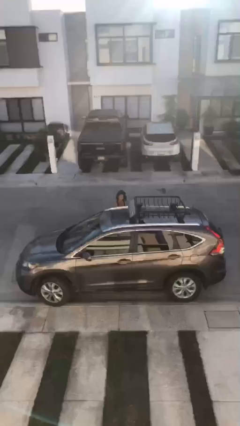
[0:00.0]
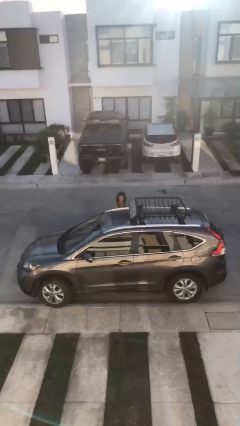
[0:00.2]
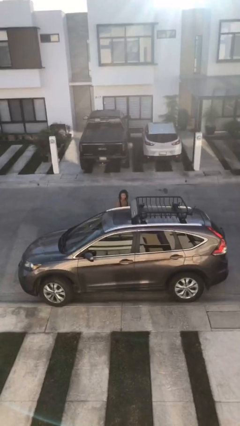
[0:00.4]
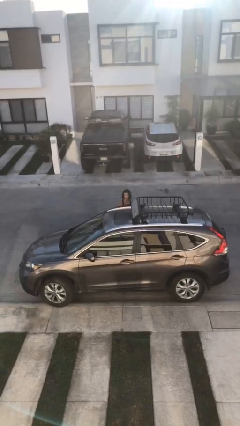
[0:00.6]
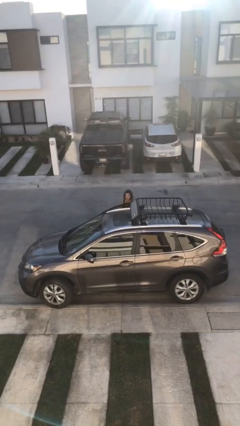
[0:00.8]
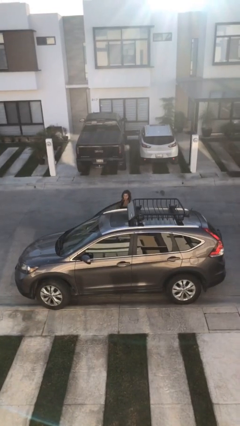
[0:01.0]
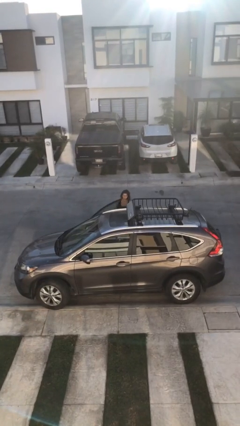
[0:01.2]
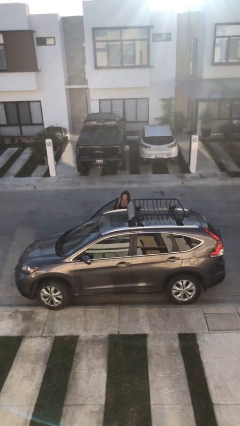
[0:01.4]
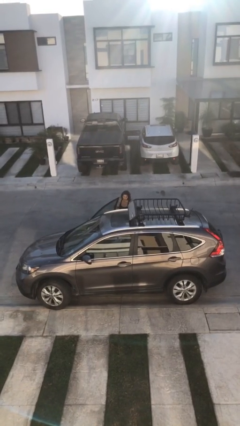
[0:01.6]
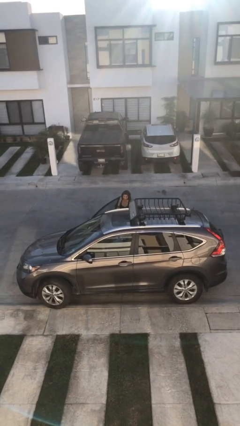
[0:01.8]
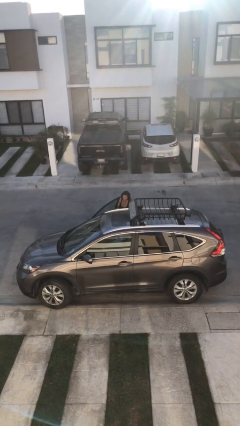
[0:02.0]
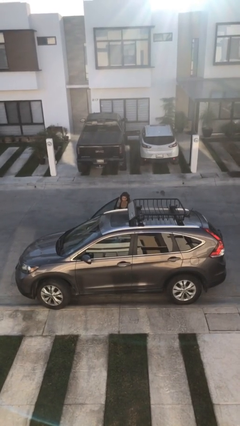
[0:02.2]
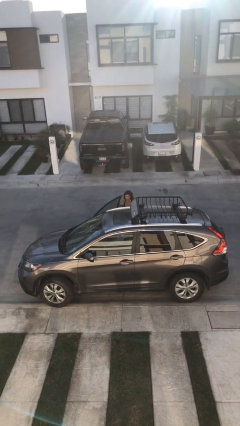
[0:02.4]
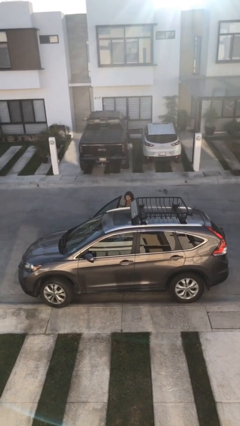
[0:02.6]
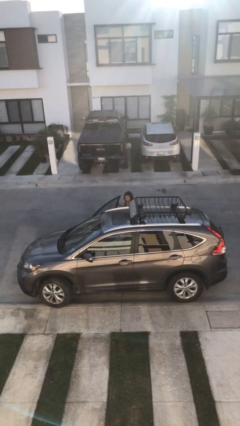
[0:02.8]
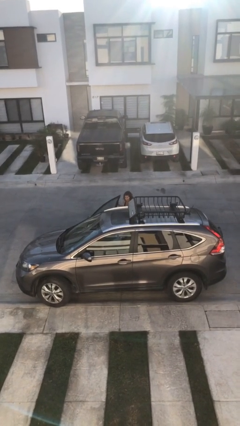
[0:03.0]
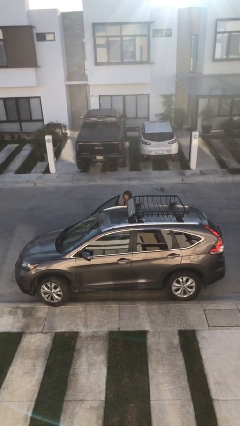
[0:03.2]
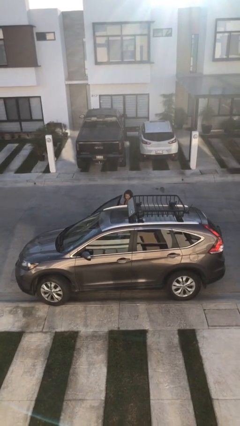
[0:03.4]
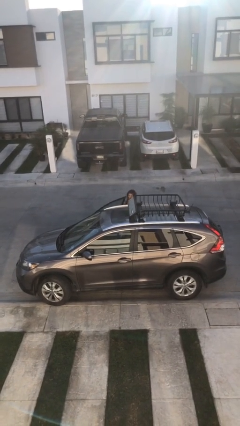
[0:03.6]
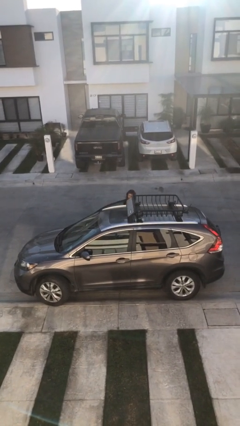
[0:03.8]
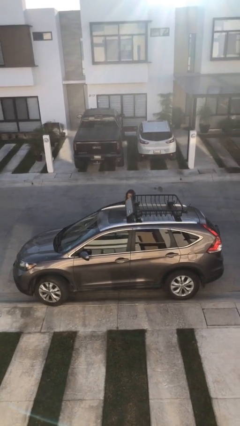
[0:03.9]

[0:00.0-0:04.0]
person opens car door

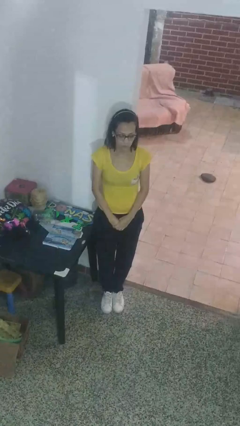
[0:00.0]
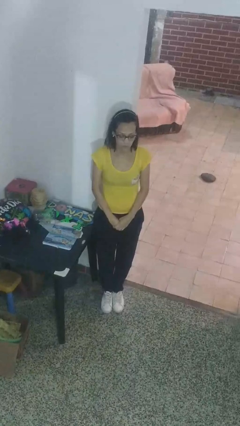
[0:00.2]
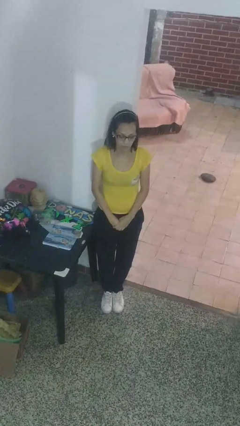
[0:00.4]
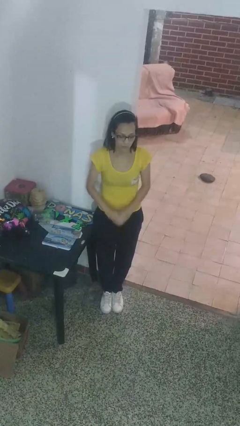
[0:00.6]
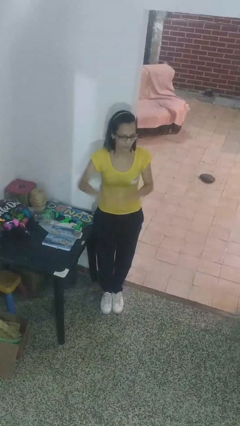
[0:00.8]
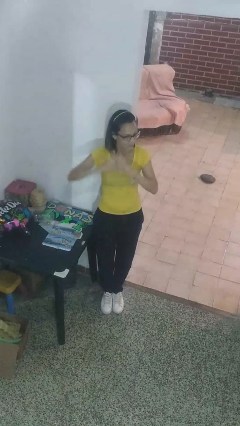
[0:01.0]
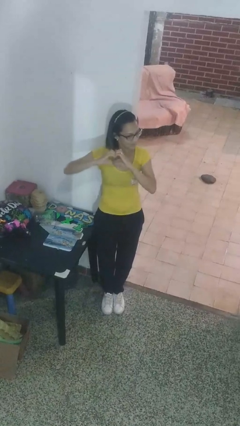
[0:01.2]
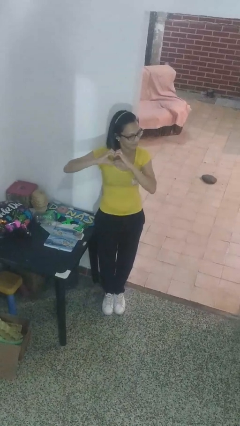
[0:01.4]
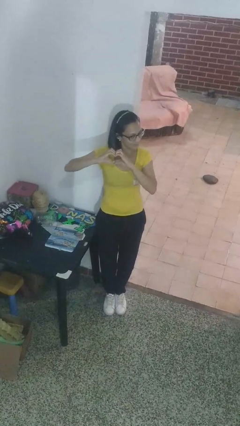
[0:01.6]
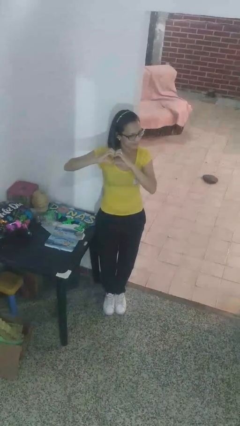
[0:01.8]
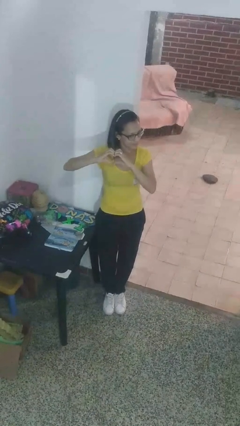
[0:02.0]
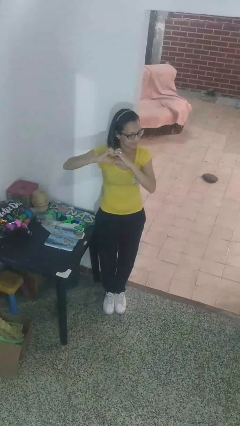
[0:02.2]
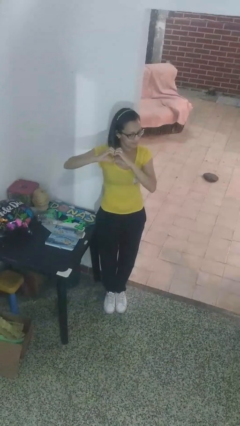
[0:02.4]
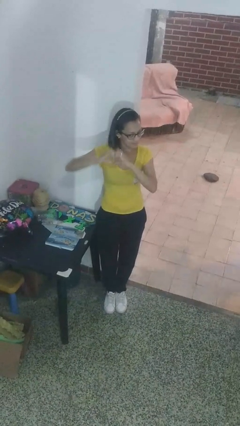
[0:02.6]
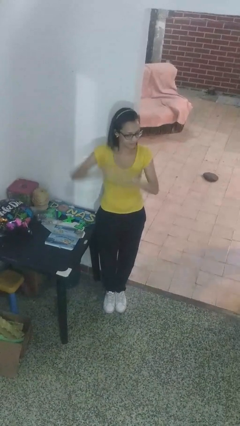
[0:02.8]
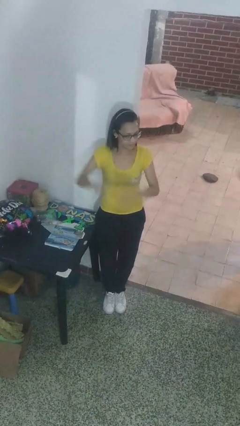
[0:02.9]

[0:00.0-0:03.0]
person gestures heart

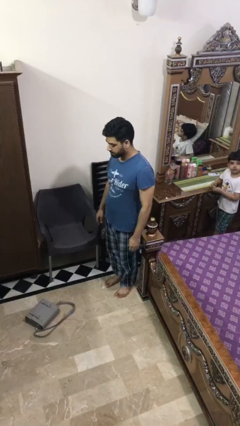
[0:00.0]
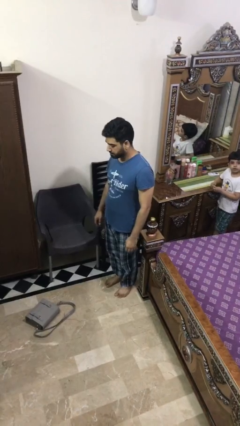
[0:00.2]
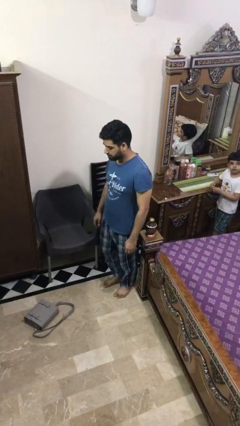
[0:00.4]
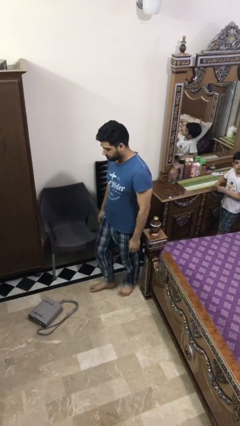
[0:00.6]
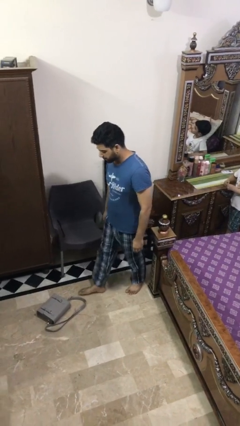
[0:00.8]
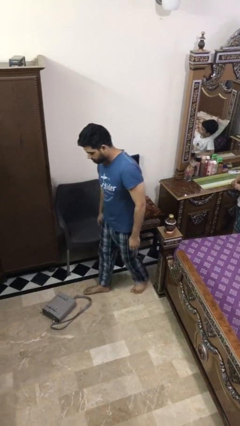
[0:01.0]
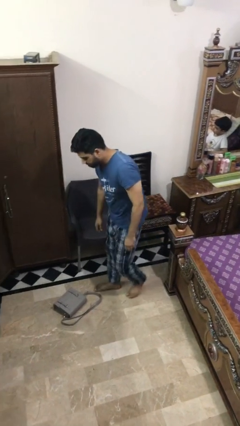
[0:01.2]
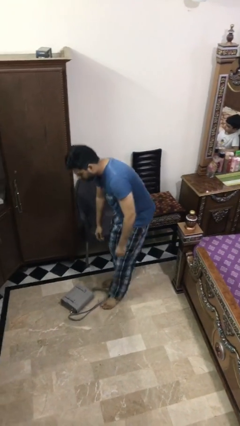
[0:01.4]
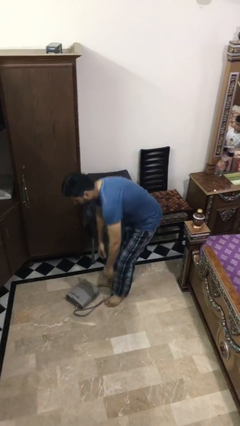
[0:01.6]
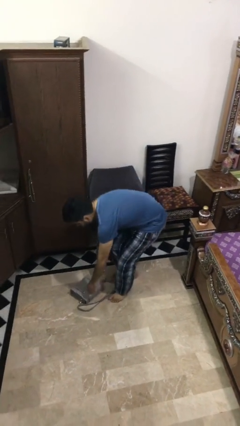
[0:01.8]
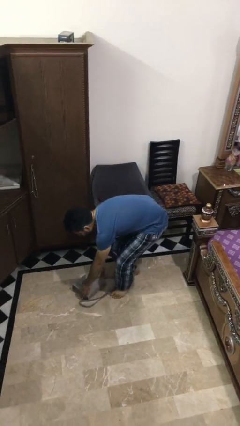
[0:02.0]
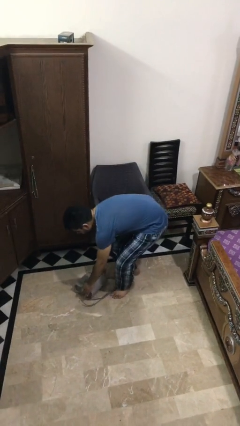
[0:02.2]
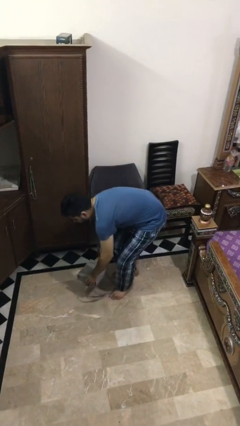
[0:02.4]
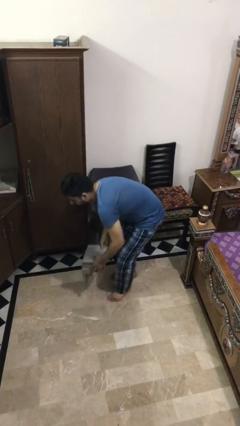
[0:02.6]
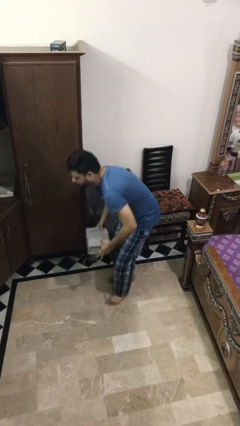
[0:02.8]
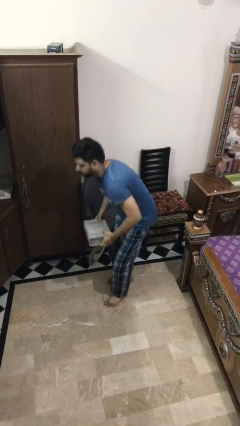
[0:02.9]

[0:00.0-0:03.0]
person picks up object from floor

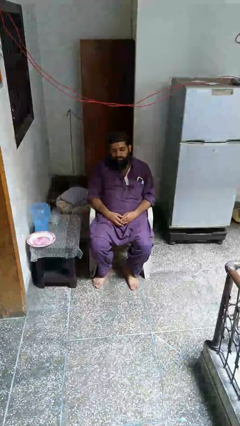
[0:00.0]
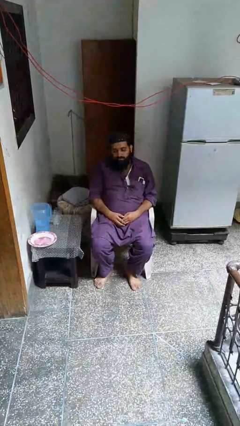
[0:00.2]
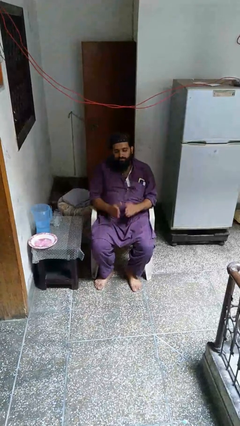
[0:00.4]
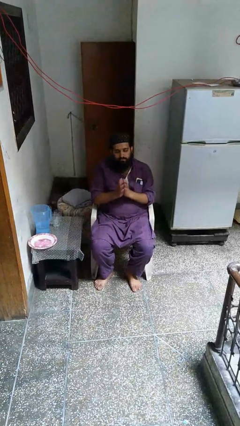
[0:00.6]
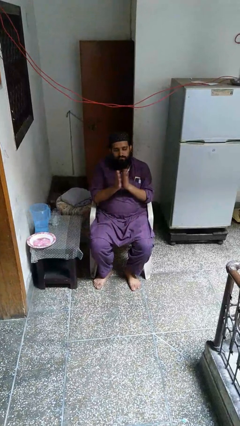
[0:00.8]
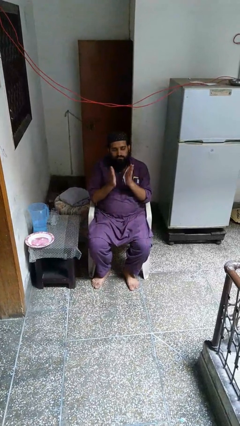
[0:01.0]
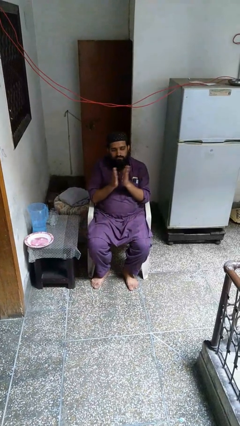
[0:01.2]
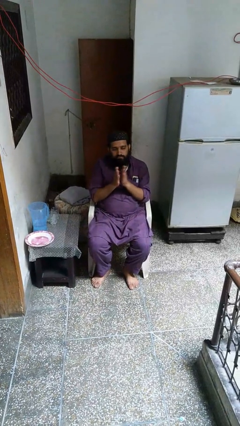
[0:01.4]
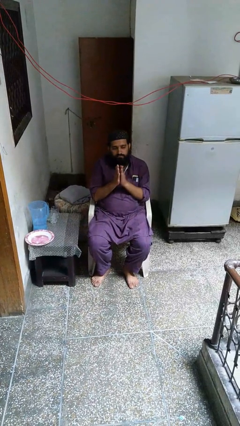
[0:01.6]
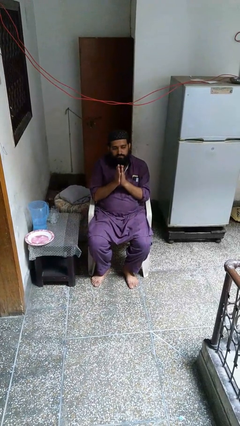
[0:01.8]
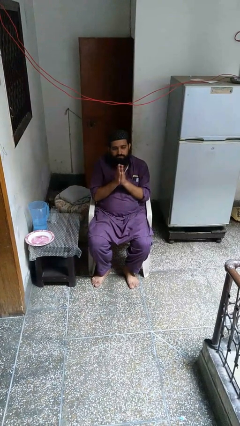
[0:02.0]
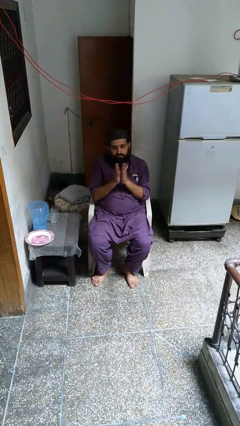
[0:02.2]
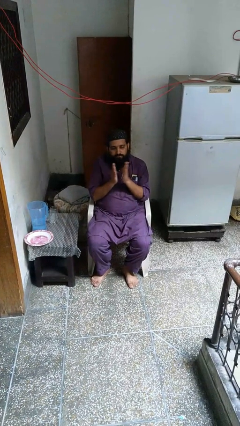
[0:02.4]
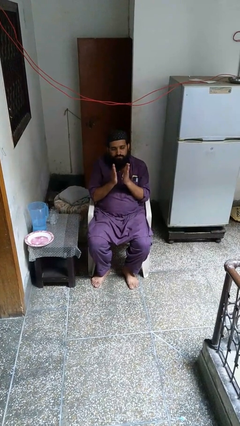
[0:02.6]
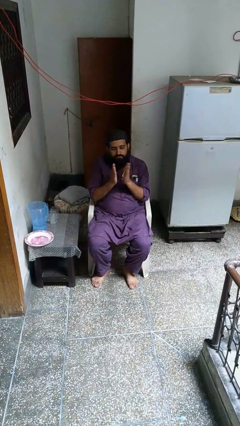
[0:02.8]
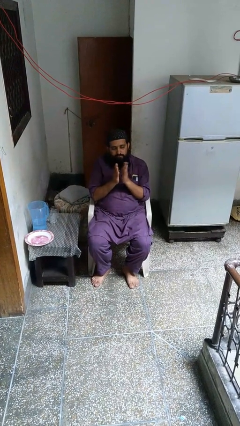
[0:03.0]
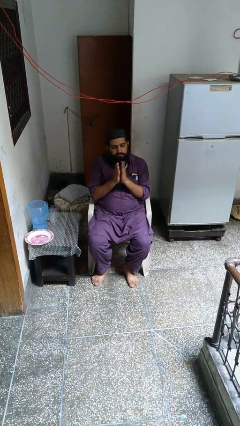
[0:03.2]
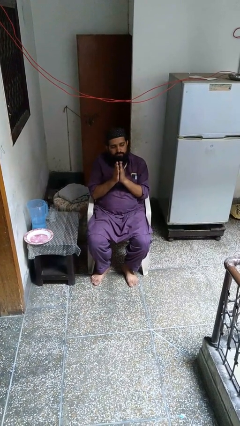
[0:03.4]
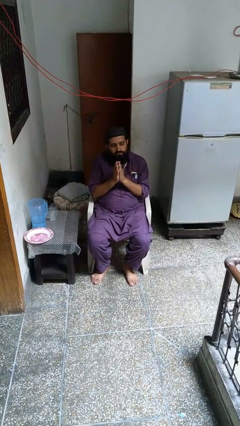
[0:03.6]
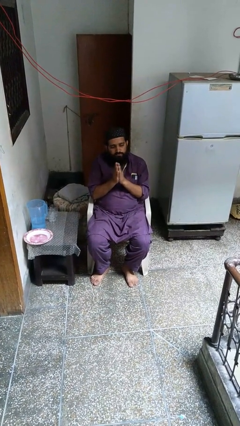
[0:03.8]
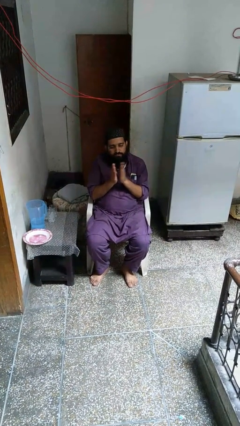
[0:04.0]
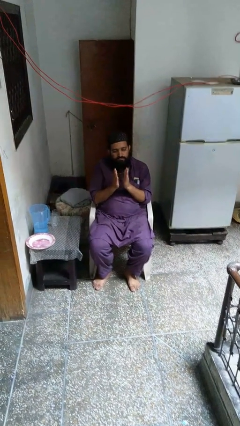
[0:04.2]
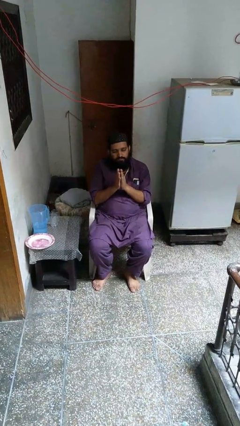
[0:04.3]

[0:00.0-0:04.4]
person claps hands

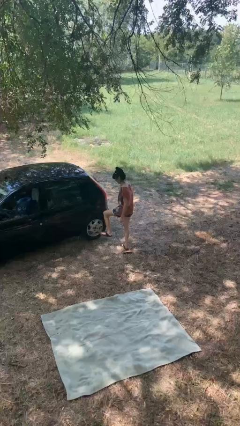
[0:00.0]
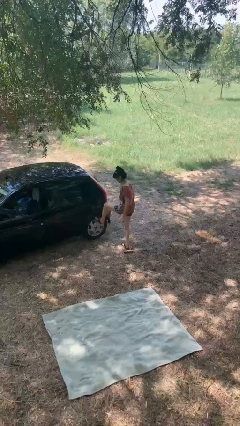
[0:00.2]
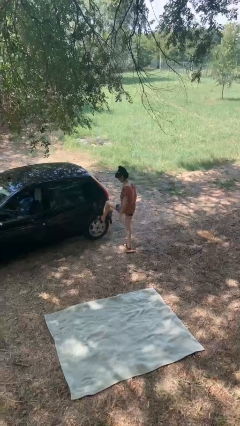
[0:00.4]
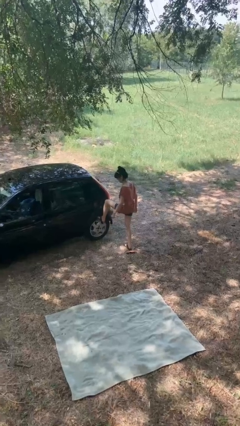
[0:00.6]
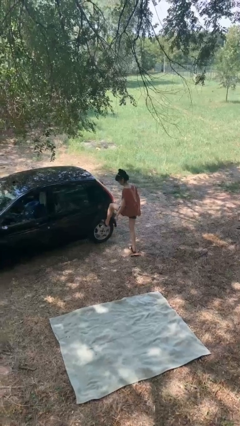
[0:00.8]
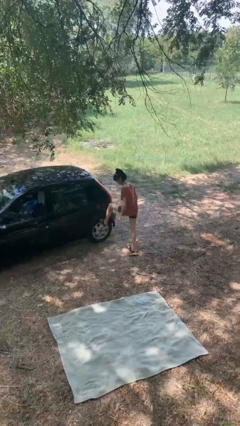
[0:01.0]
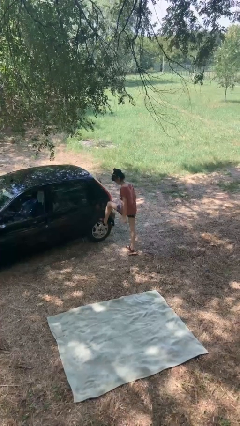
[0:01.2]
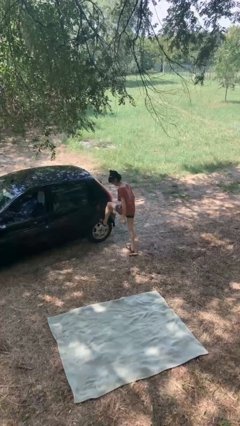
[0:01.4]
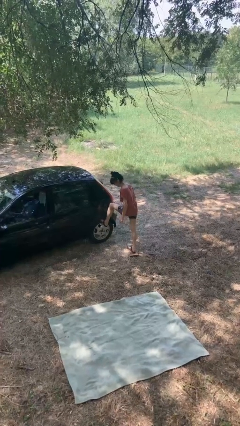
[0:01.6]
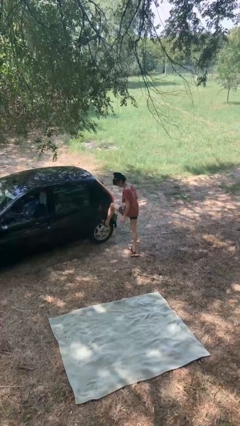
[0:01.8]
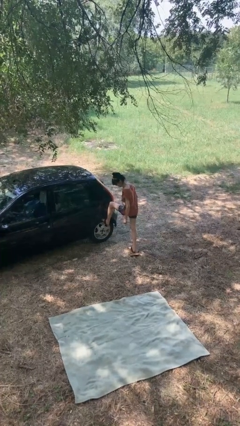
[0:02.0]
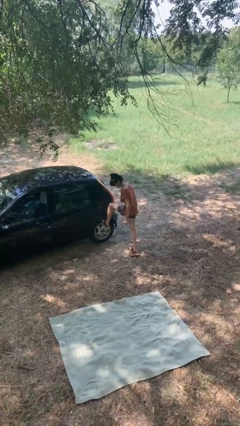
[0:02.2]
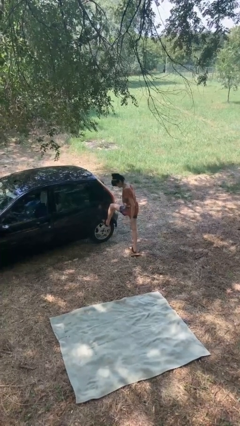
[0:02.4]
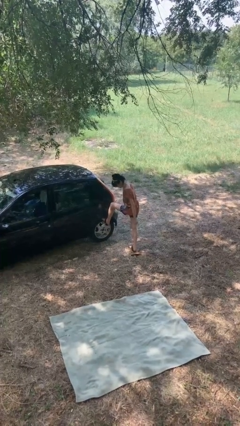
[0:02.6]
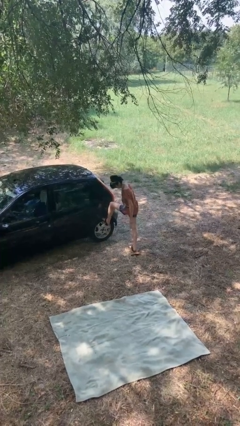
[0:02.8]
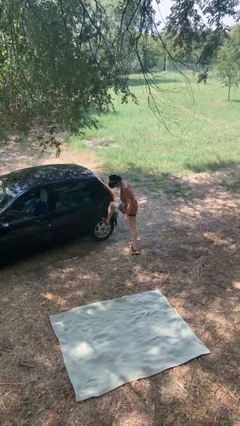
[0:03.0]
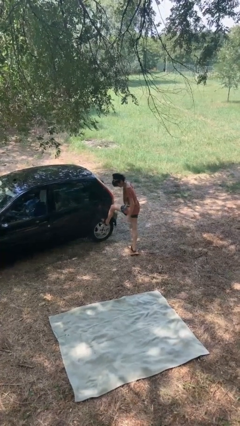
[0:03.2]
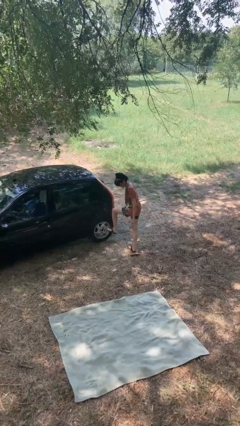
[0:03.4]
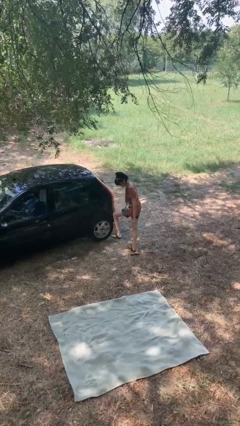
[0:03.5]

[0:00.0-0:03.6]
person kicks car tires

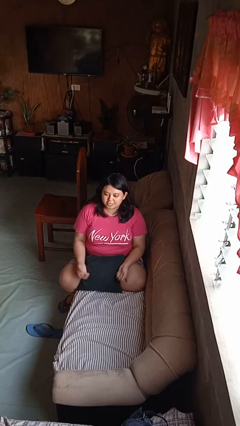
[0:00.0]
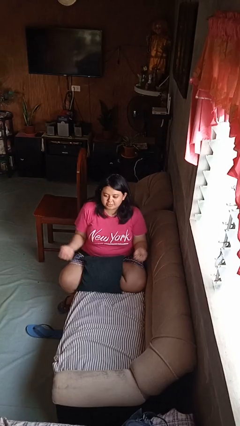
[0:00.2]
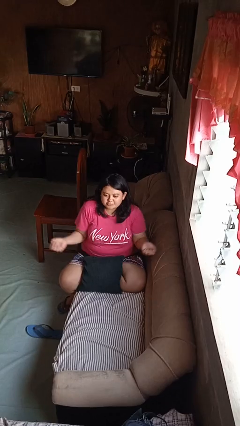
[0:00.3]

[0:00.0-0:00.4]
person shrugs
